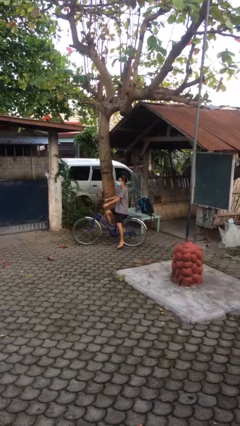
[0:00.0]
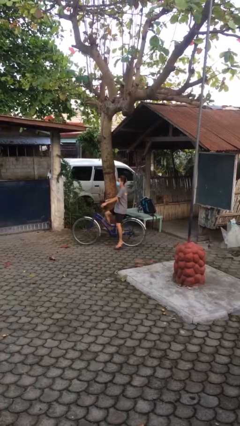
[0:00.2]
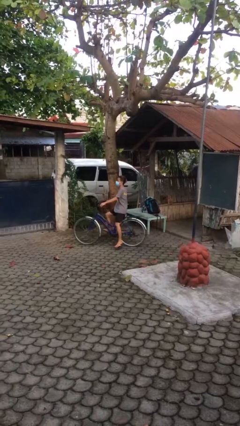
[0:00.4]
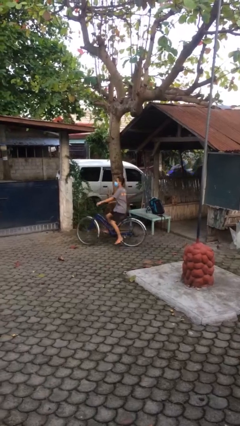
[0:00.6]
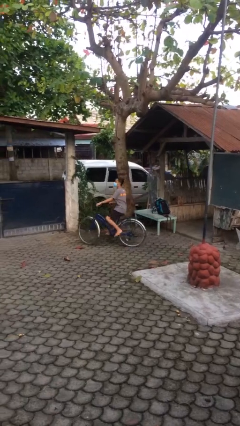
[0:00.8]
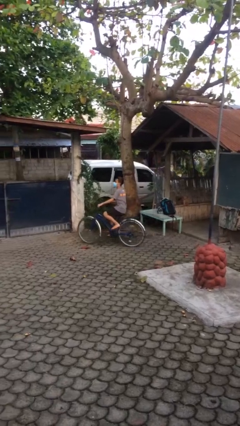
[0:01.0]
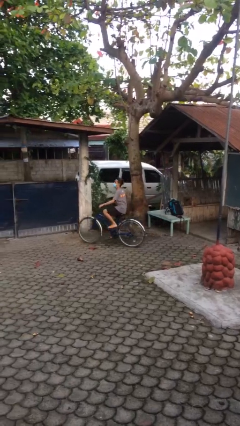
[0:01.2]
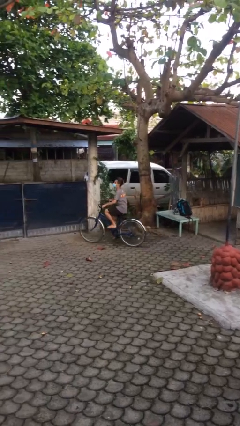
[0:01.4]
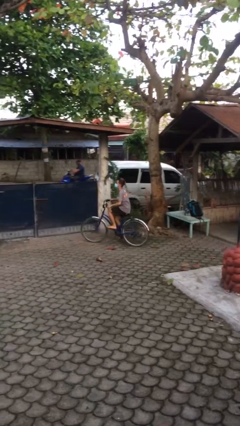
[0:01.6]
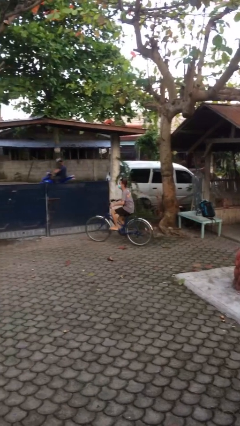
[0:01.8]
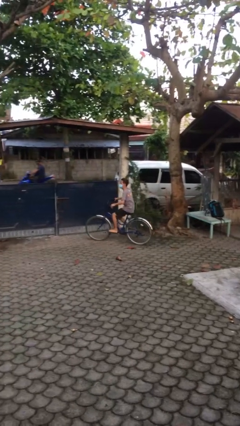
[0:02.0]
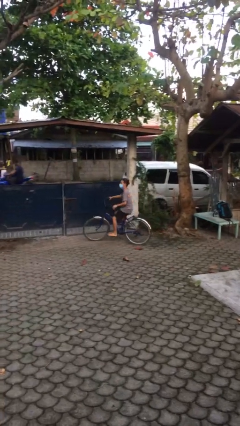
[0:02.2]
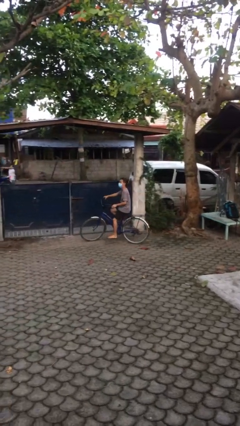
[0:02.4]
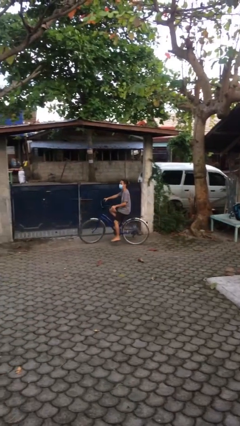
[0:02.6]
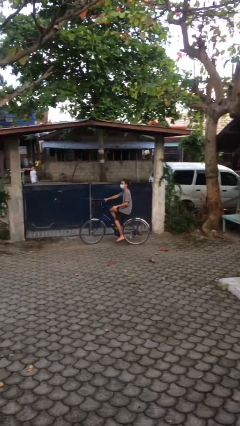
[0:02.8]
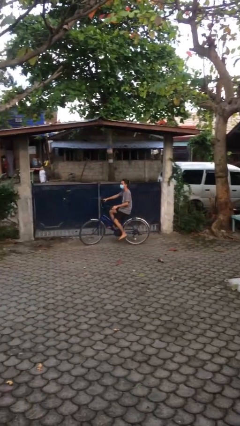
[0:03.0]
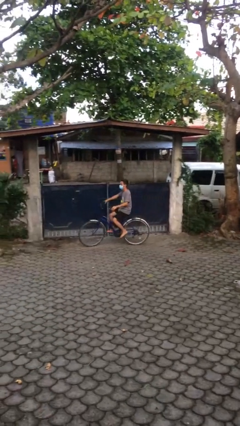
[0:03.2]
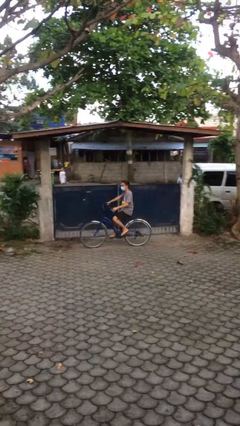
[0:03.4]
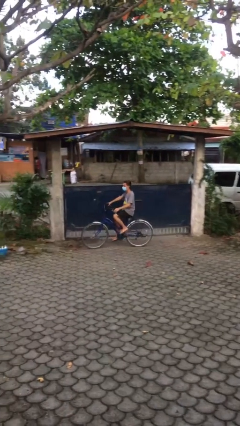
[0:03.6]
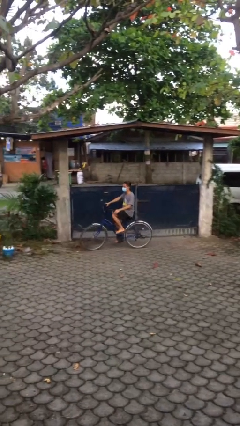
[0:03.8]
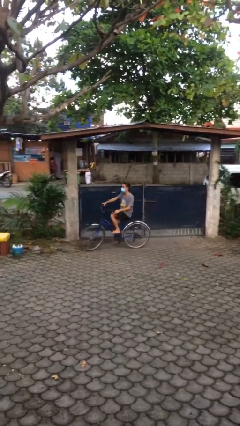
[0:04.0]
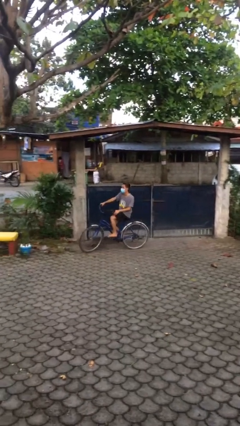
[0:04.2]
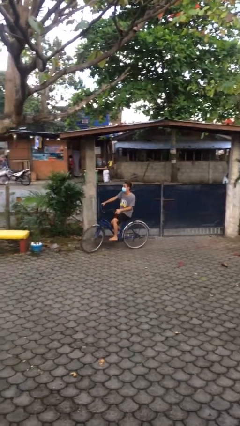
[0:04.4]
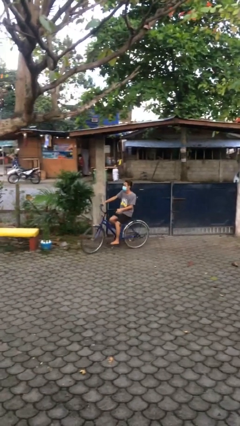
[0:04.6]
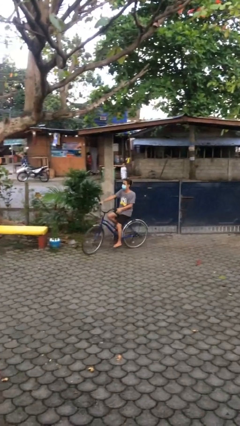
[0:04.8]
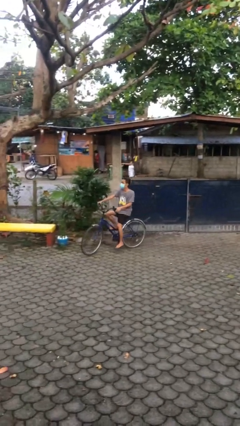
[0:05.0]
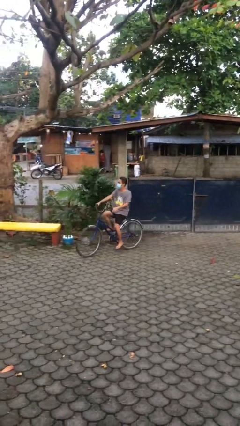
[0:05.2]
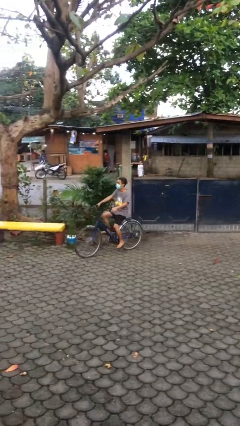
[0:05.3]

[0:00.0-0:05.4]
person rides bicycle

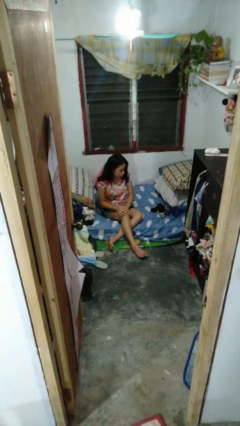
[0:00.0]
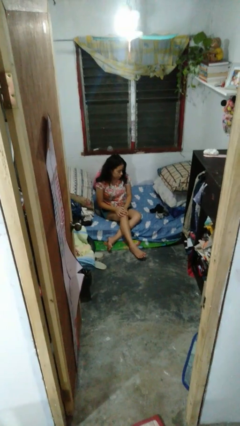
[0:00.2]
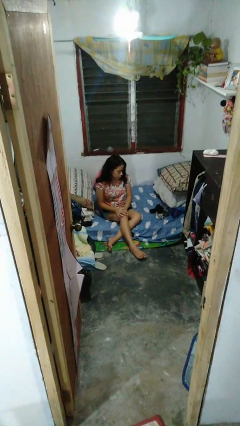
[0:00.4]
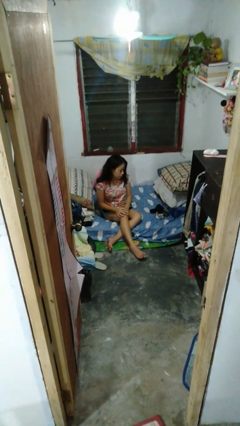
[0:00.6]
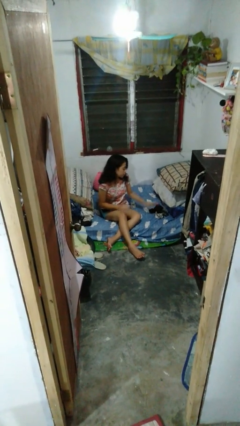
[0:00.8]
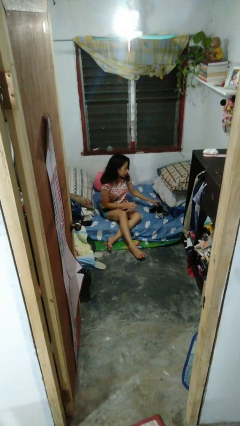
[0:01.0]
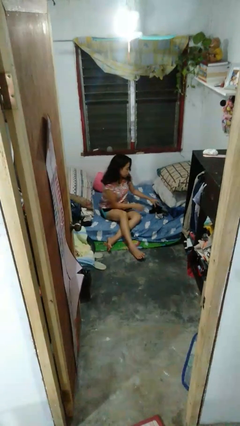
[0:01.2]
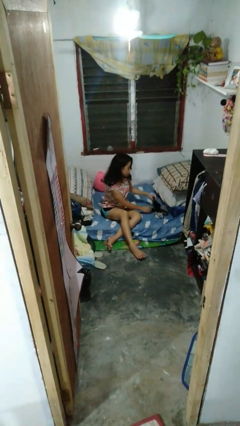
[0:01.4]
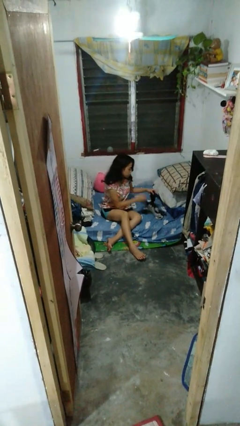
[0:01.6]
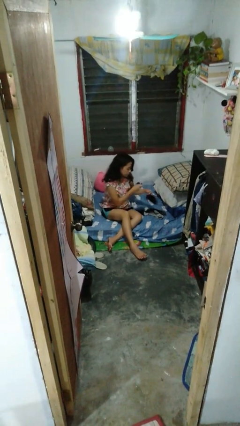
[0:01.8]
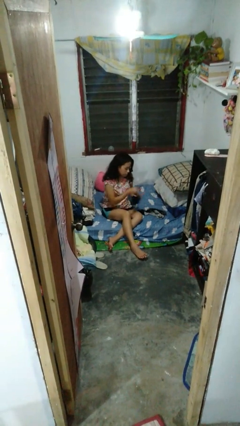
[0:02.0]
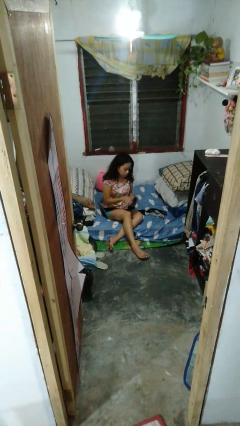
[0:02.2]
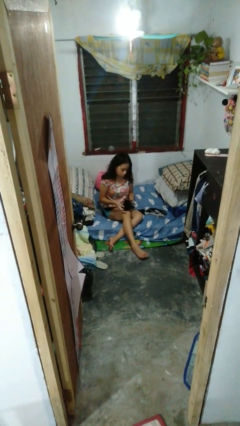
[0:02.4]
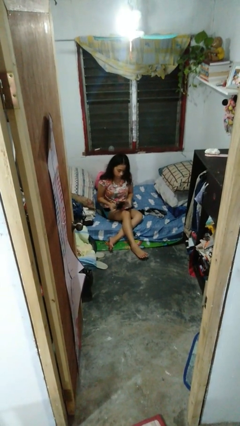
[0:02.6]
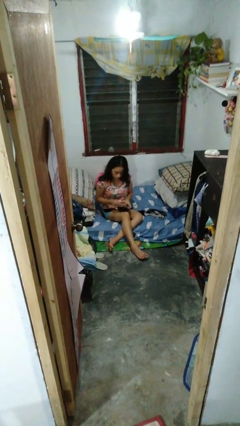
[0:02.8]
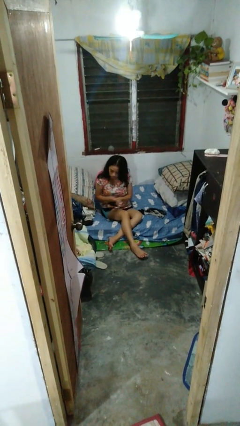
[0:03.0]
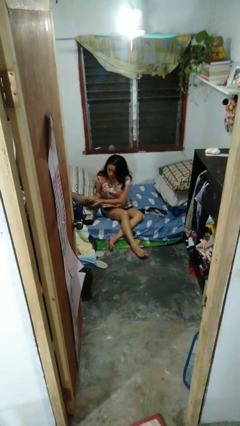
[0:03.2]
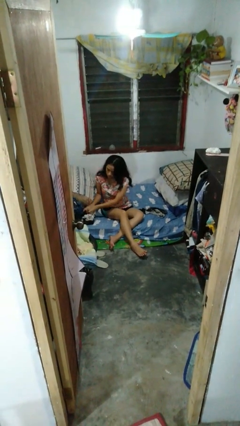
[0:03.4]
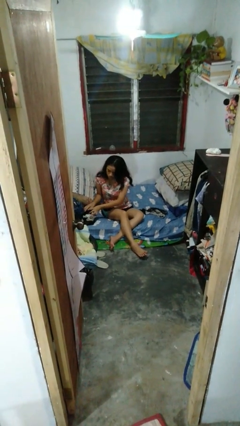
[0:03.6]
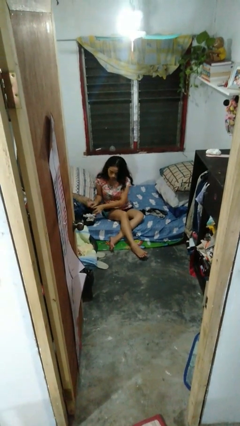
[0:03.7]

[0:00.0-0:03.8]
person folds socks

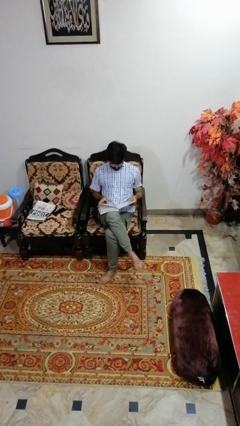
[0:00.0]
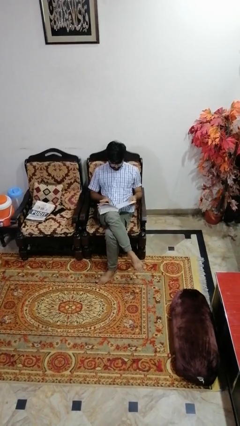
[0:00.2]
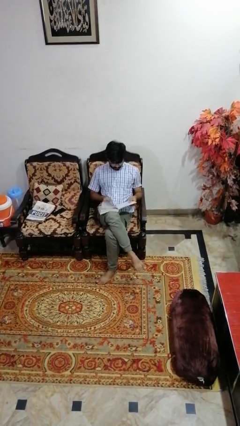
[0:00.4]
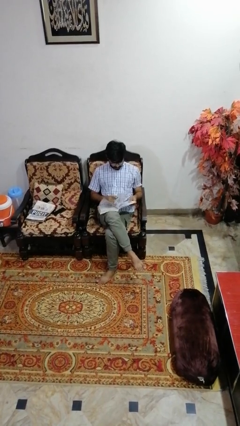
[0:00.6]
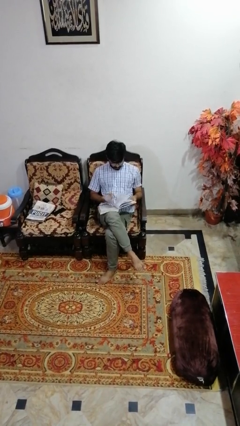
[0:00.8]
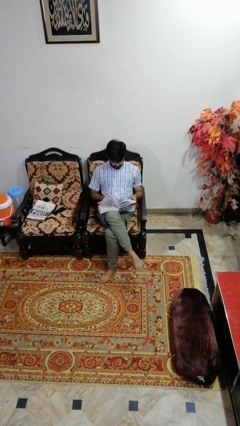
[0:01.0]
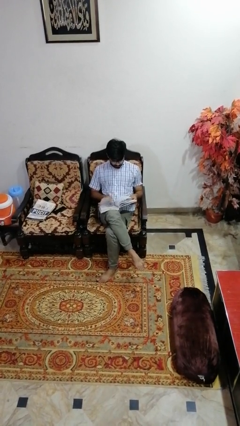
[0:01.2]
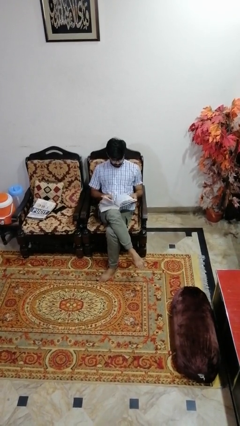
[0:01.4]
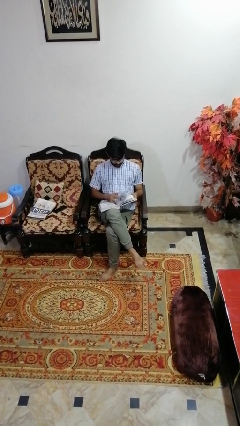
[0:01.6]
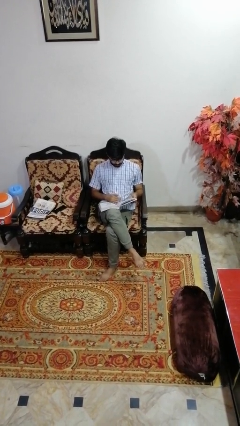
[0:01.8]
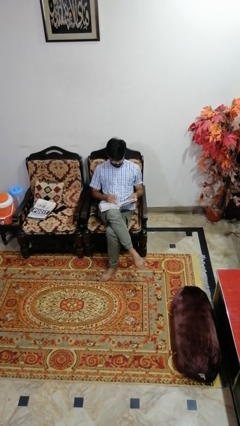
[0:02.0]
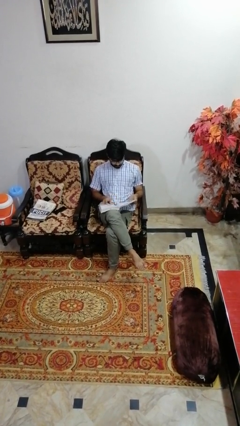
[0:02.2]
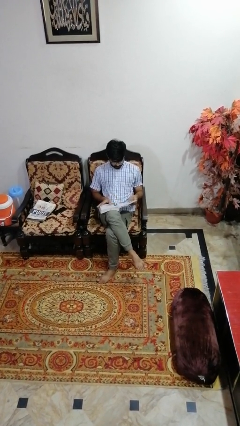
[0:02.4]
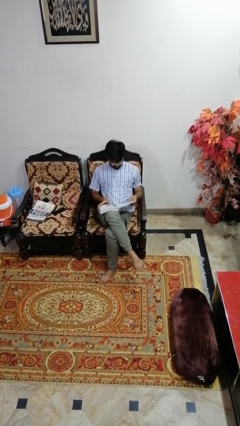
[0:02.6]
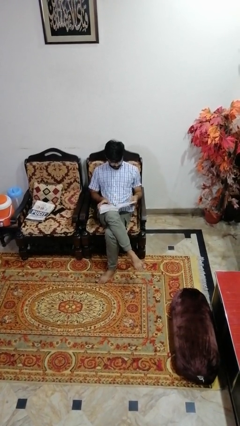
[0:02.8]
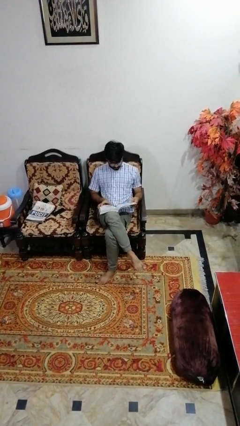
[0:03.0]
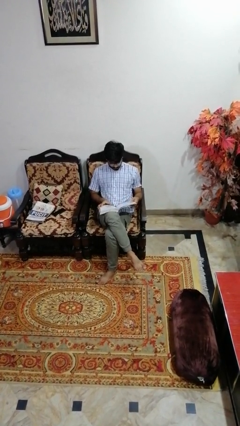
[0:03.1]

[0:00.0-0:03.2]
person looks at wristwatch

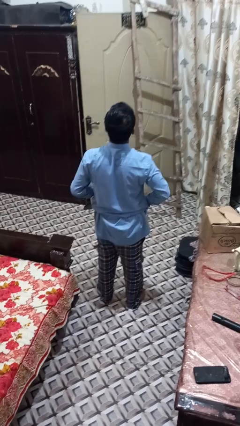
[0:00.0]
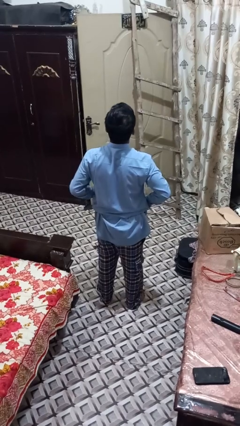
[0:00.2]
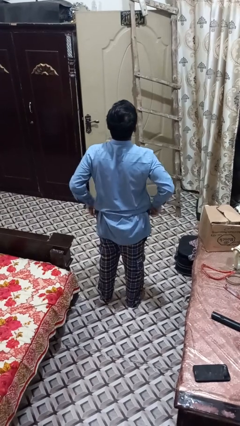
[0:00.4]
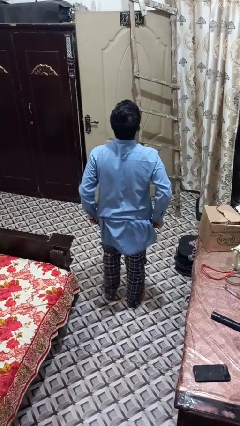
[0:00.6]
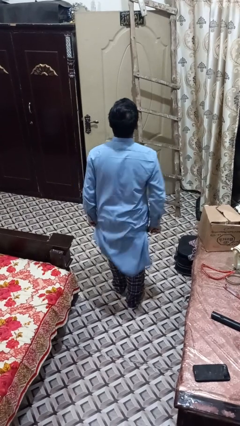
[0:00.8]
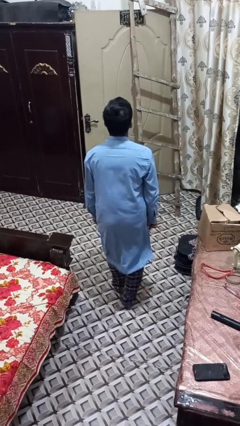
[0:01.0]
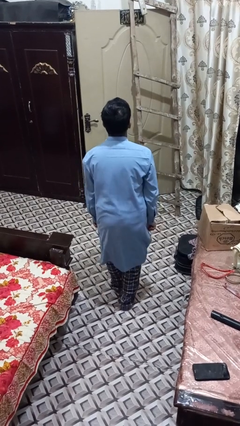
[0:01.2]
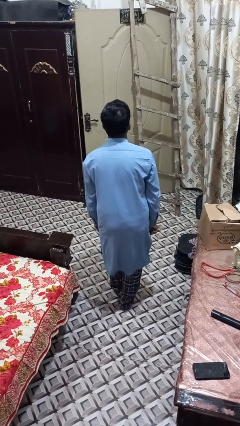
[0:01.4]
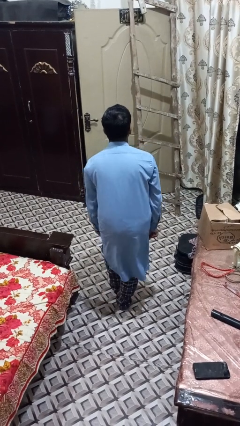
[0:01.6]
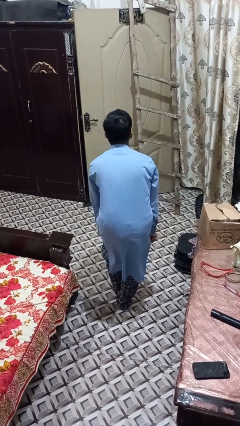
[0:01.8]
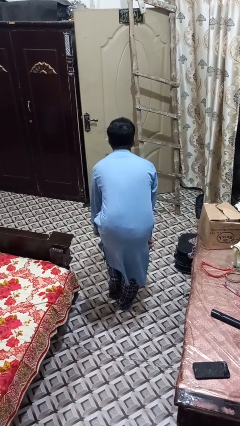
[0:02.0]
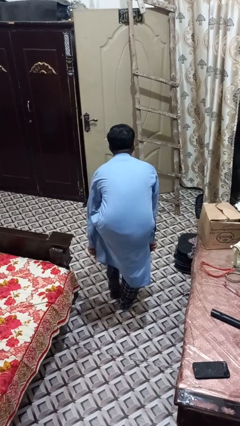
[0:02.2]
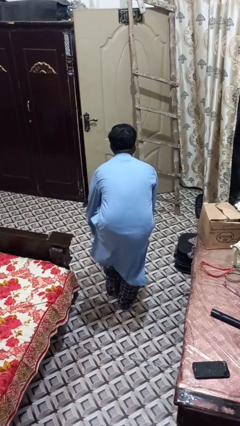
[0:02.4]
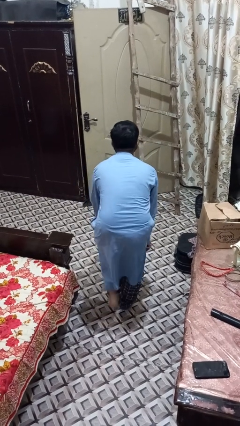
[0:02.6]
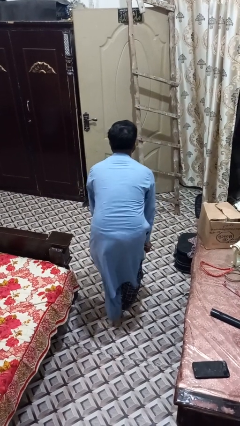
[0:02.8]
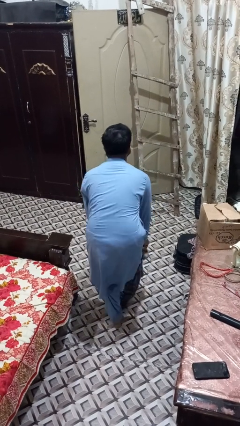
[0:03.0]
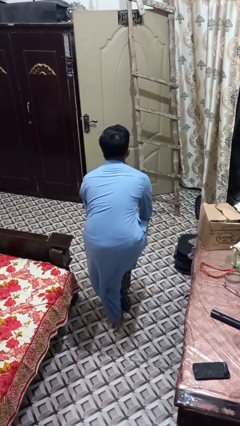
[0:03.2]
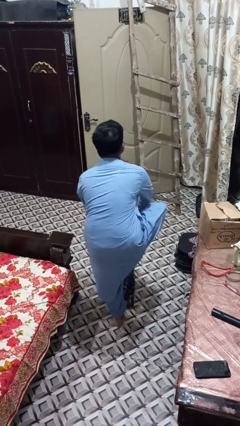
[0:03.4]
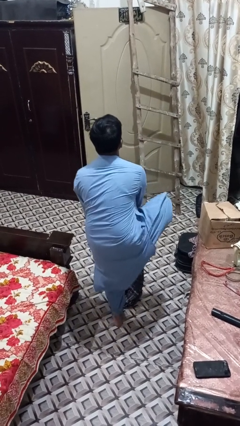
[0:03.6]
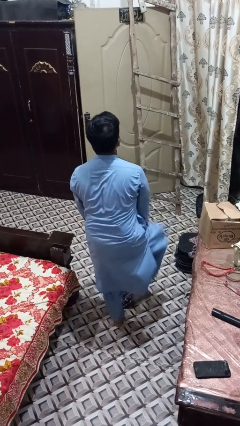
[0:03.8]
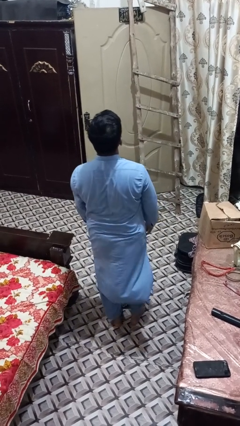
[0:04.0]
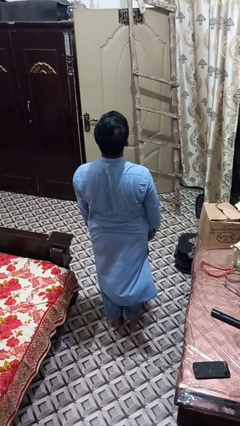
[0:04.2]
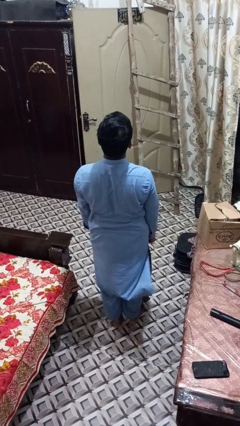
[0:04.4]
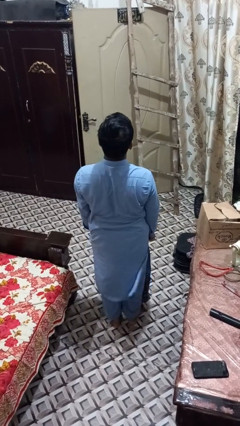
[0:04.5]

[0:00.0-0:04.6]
person takes off pants

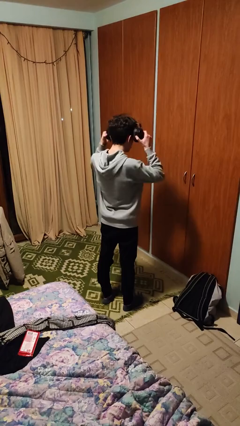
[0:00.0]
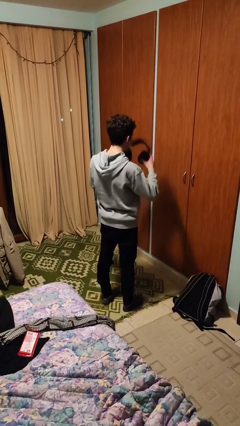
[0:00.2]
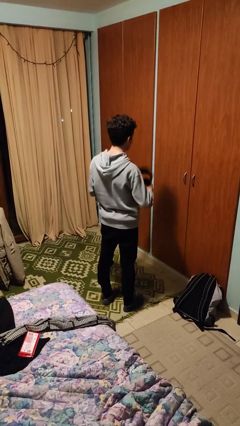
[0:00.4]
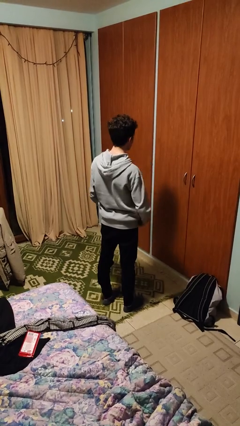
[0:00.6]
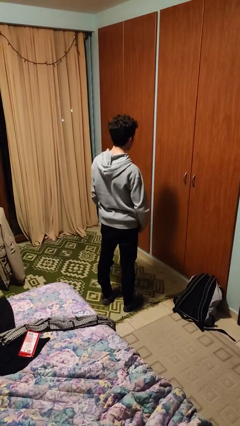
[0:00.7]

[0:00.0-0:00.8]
person takes off headphones

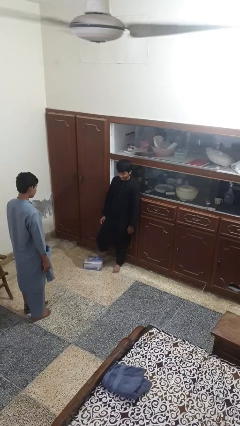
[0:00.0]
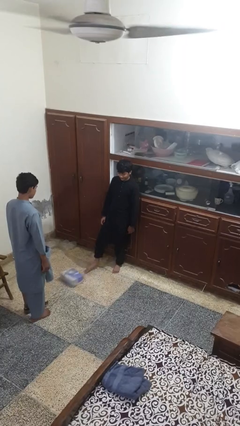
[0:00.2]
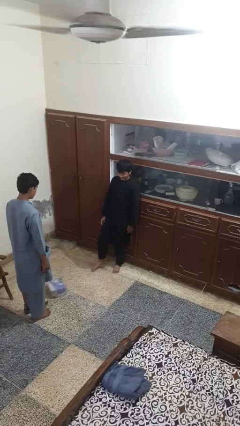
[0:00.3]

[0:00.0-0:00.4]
person kicks object to person
